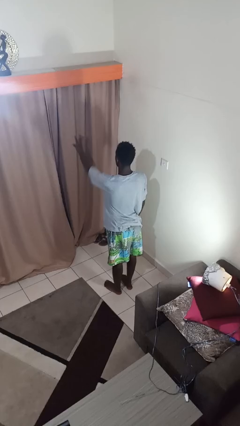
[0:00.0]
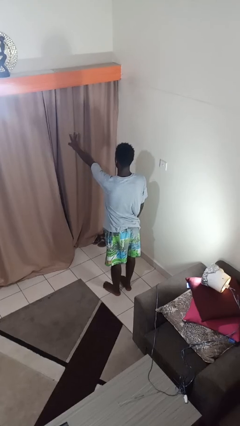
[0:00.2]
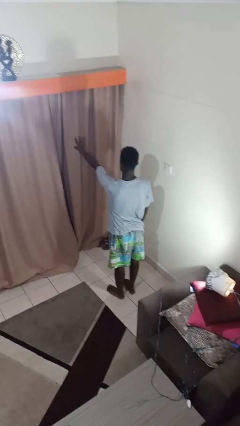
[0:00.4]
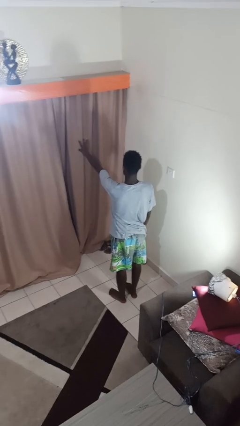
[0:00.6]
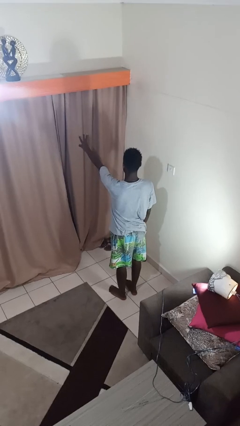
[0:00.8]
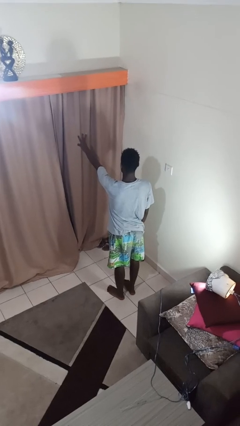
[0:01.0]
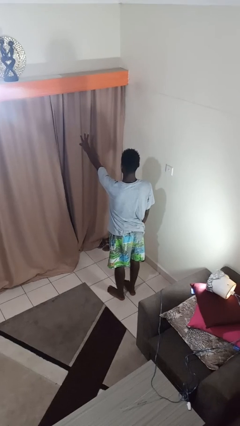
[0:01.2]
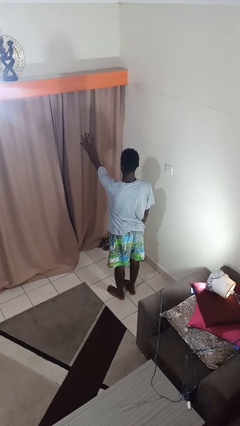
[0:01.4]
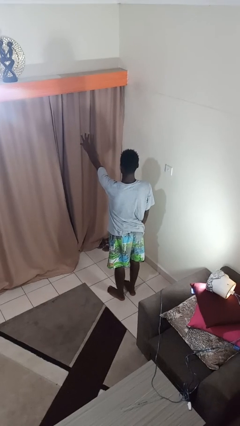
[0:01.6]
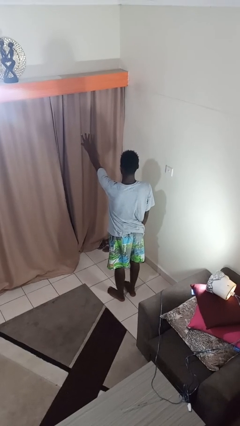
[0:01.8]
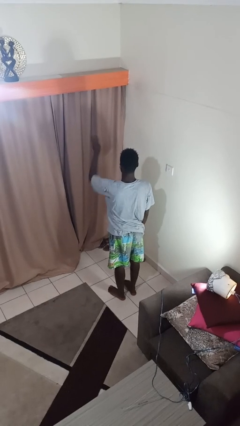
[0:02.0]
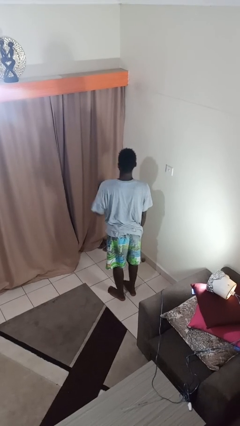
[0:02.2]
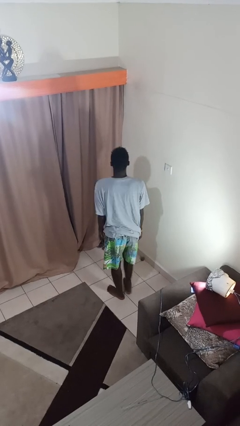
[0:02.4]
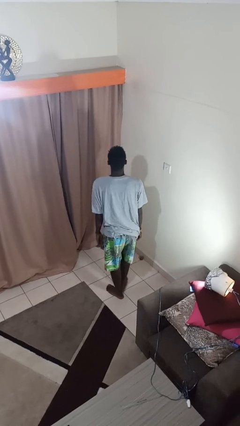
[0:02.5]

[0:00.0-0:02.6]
person gestures number three

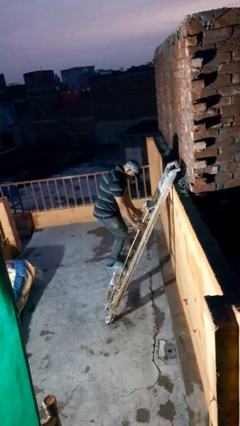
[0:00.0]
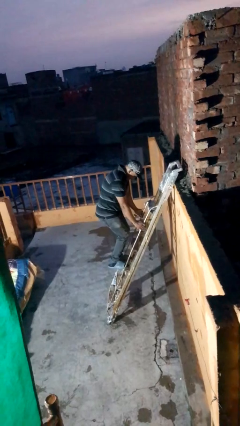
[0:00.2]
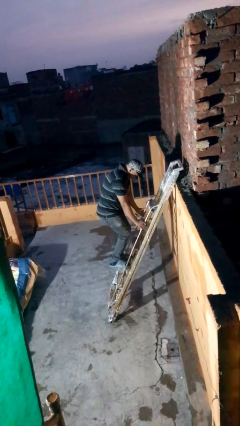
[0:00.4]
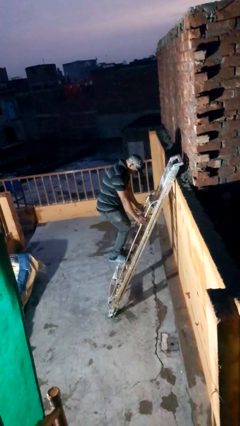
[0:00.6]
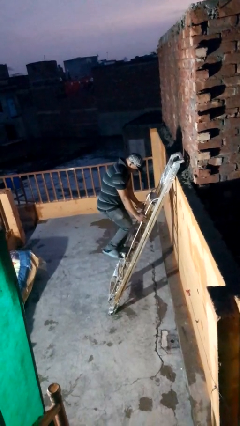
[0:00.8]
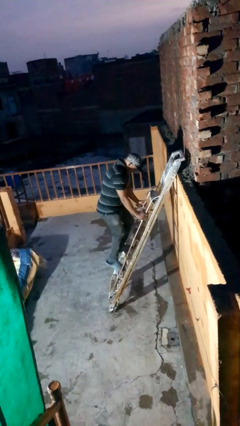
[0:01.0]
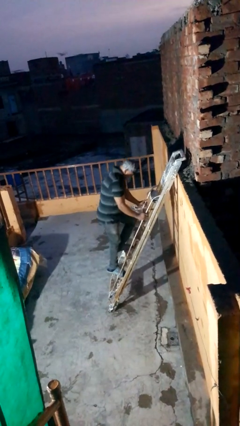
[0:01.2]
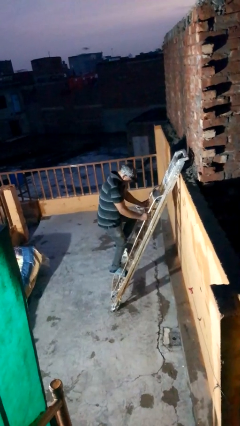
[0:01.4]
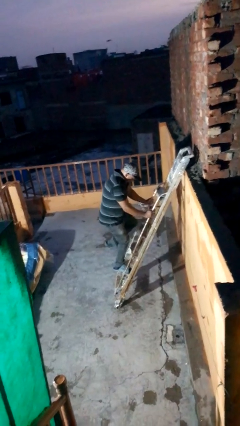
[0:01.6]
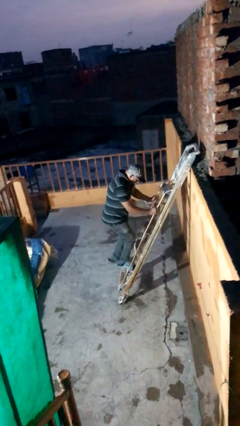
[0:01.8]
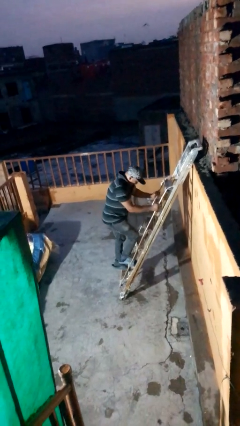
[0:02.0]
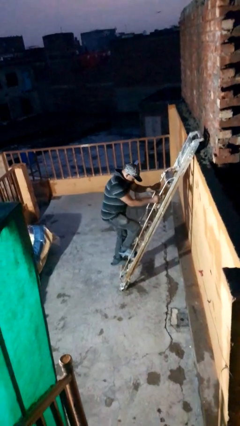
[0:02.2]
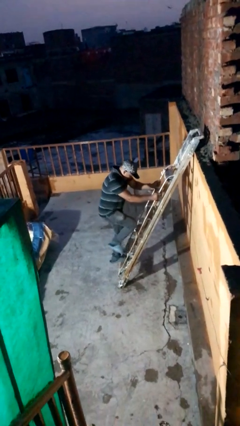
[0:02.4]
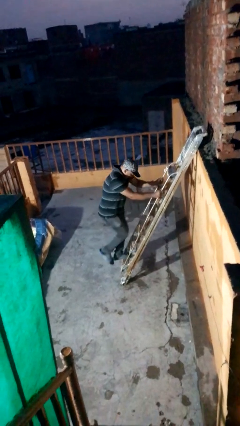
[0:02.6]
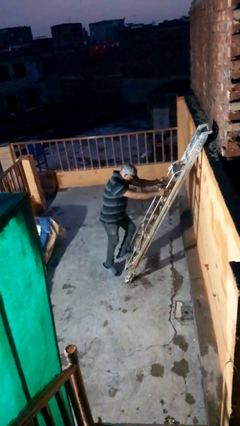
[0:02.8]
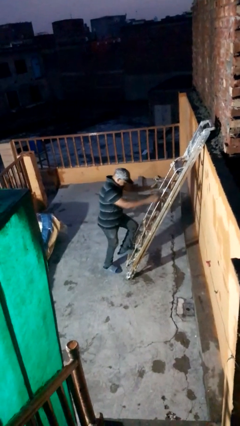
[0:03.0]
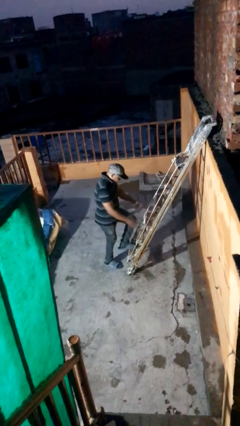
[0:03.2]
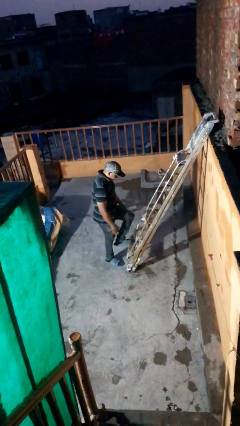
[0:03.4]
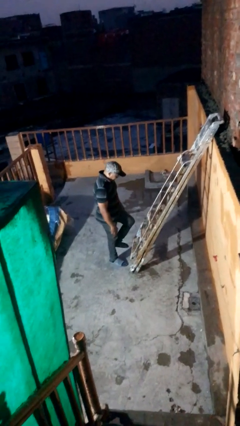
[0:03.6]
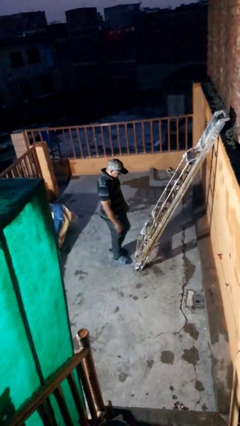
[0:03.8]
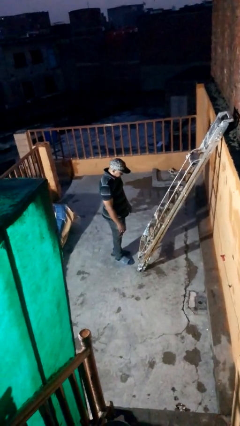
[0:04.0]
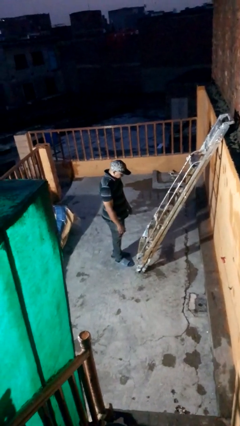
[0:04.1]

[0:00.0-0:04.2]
person climbs down ladder

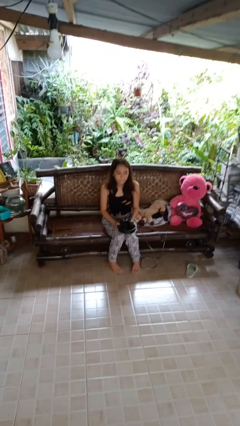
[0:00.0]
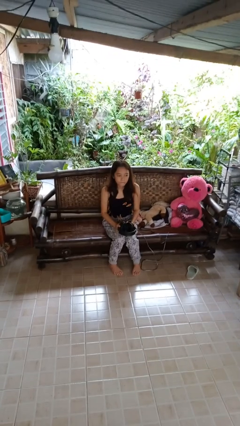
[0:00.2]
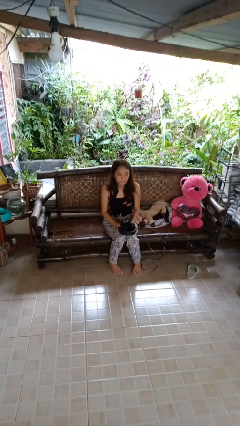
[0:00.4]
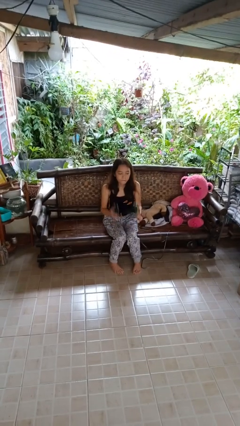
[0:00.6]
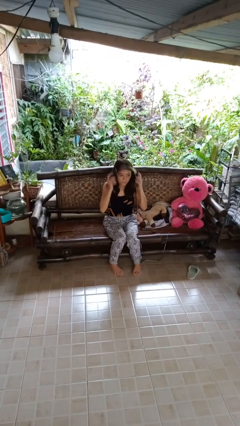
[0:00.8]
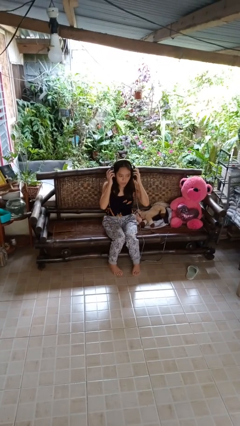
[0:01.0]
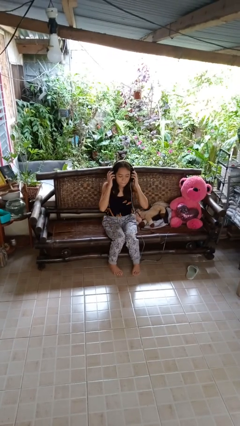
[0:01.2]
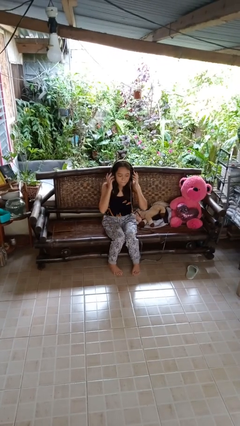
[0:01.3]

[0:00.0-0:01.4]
person puts on headphones

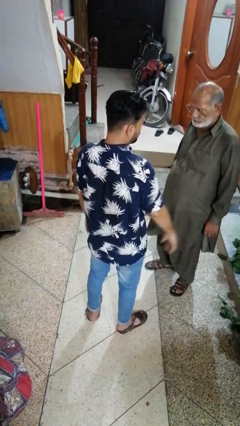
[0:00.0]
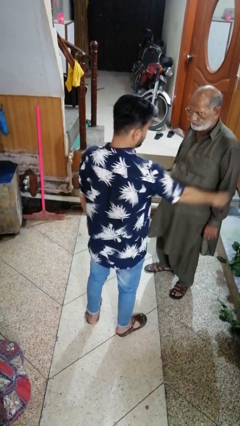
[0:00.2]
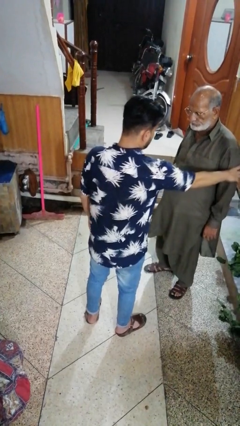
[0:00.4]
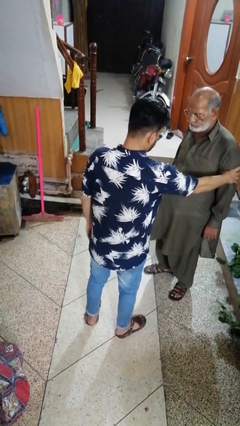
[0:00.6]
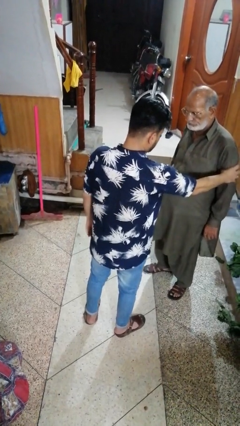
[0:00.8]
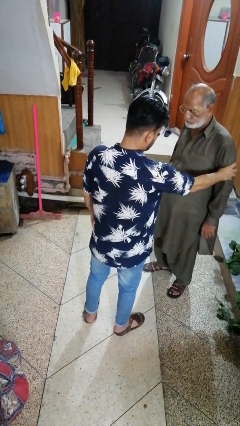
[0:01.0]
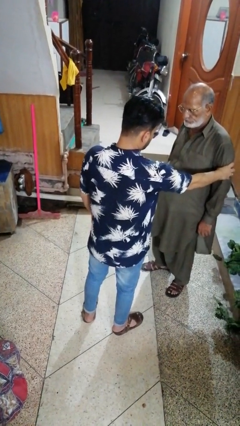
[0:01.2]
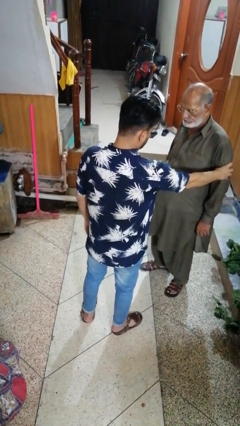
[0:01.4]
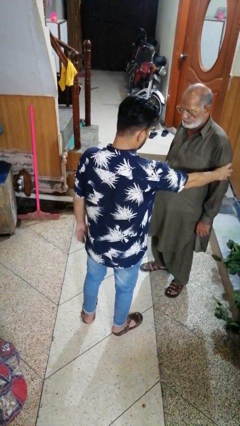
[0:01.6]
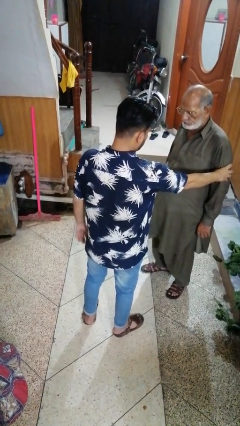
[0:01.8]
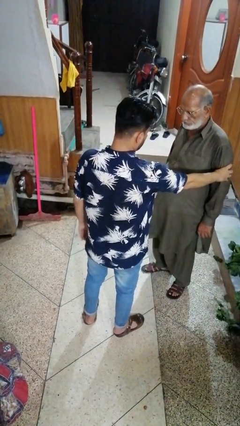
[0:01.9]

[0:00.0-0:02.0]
person grabs person by bicep

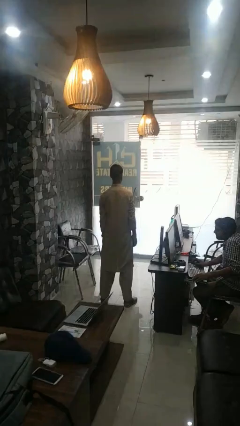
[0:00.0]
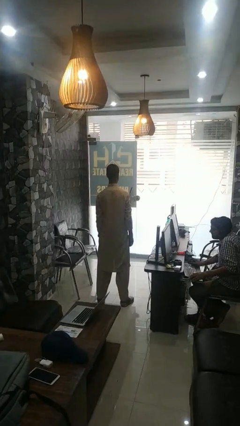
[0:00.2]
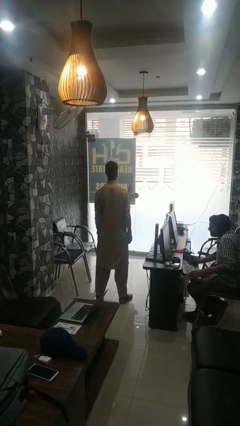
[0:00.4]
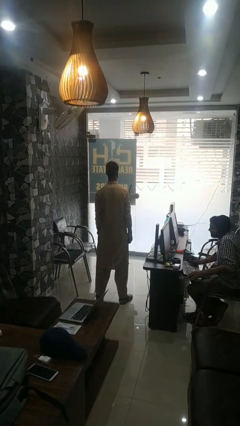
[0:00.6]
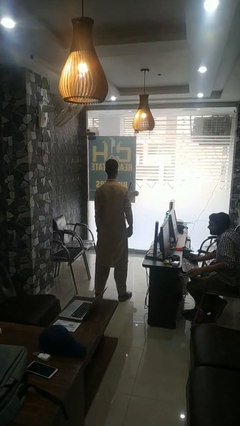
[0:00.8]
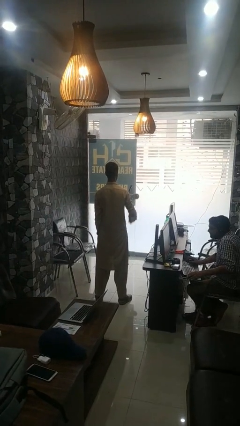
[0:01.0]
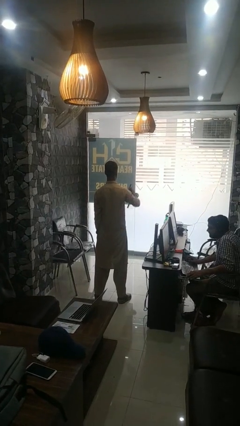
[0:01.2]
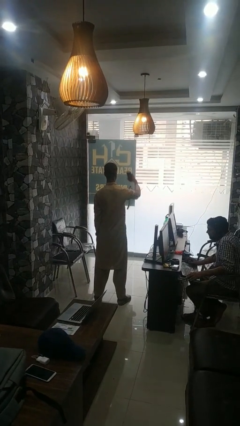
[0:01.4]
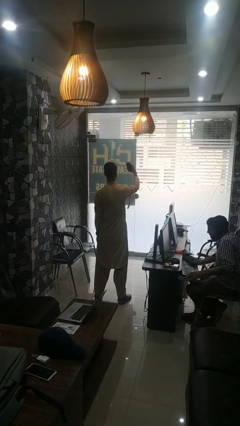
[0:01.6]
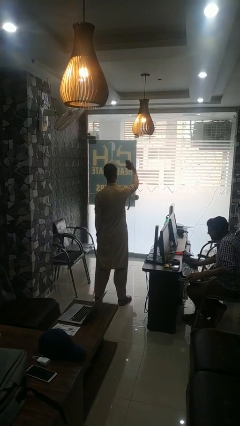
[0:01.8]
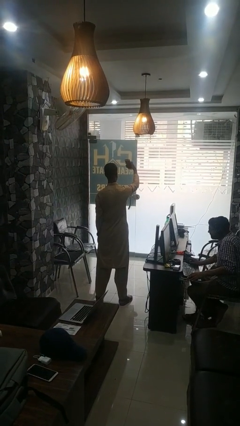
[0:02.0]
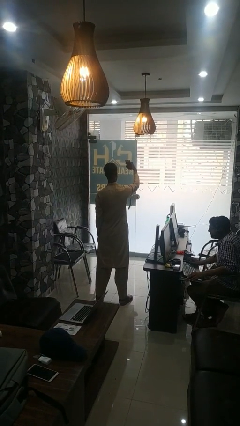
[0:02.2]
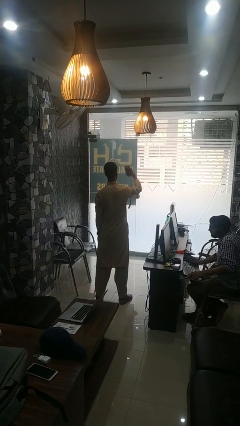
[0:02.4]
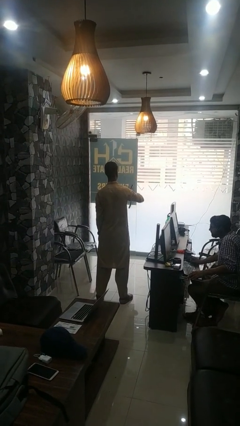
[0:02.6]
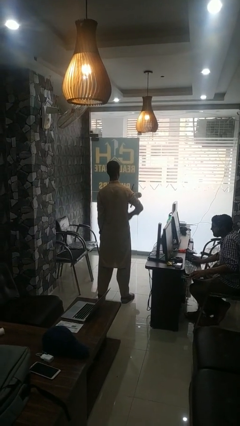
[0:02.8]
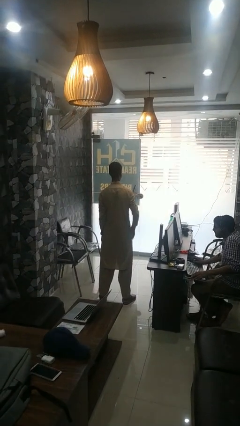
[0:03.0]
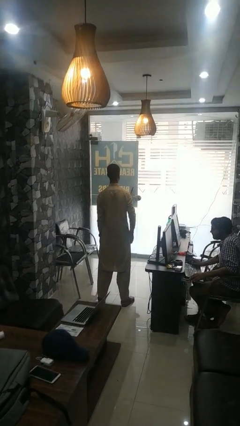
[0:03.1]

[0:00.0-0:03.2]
person takes selfie

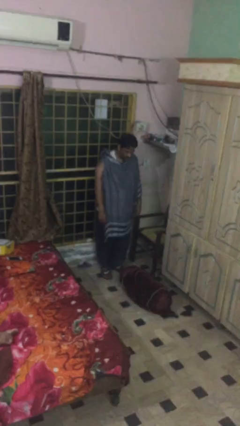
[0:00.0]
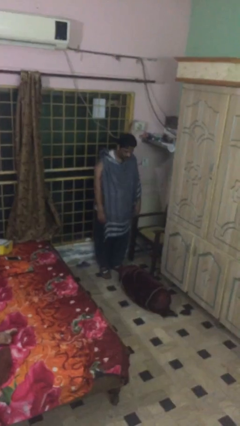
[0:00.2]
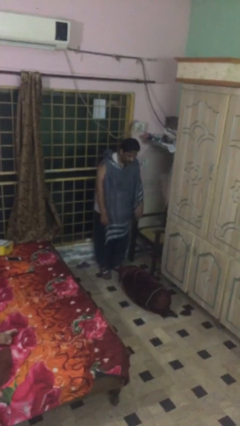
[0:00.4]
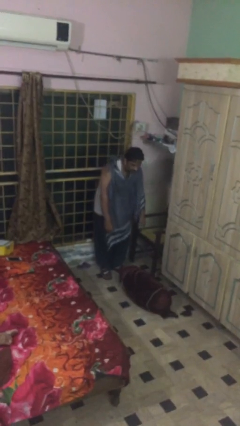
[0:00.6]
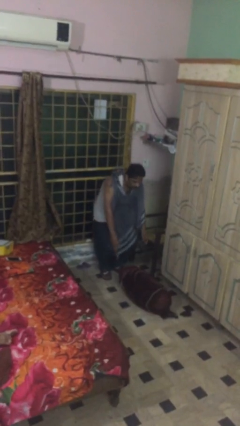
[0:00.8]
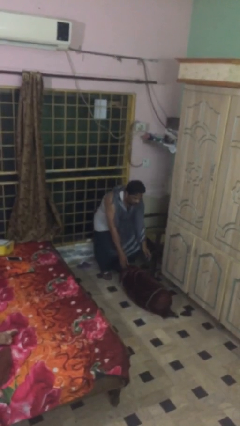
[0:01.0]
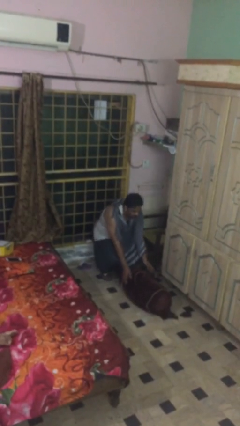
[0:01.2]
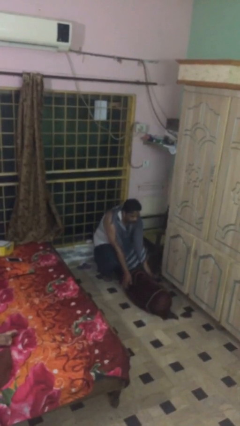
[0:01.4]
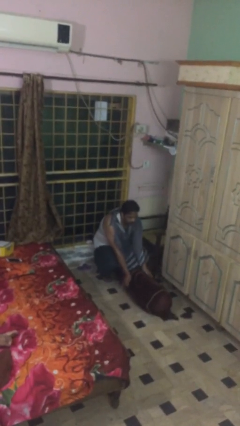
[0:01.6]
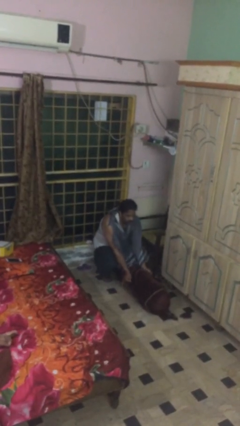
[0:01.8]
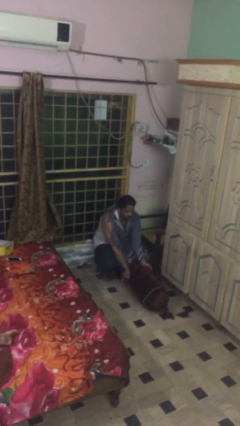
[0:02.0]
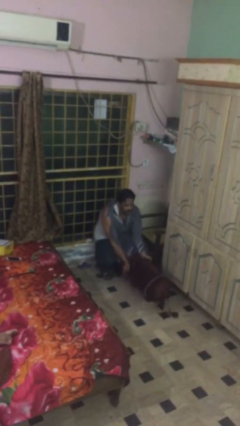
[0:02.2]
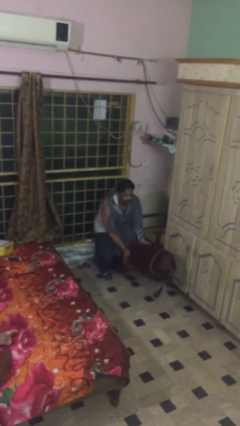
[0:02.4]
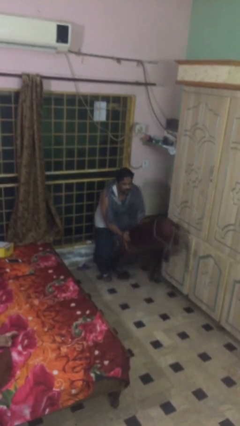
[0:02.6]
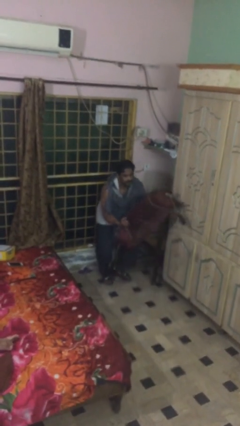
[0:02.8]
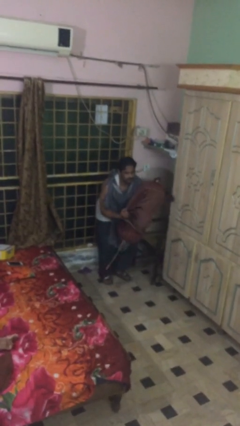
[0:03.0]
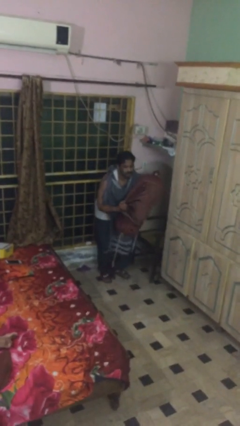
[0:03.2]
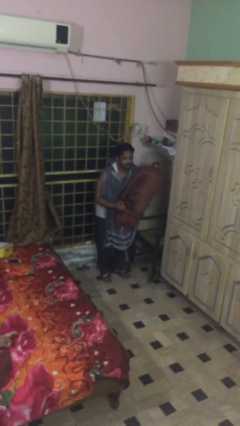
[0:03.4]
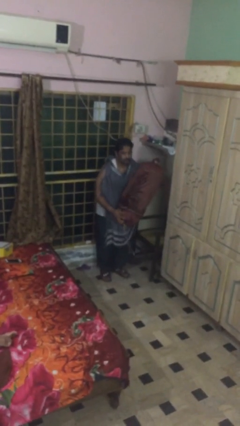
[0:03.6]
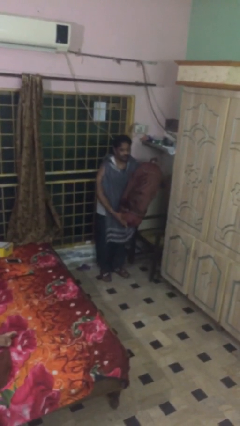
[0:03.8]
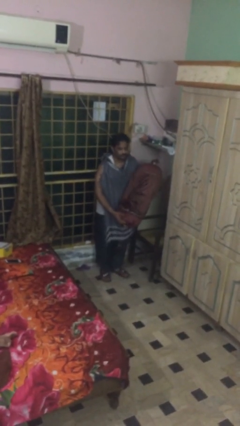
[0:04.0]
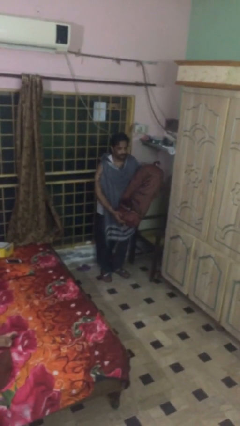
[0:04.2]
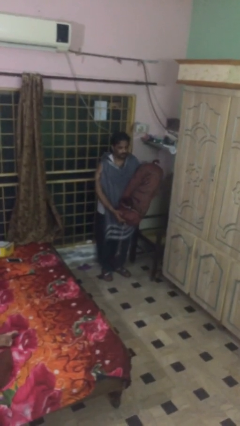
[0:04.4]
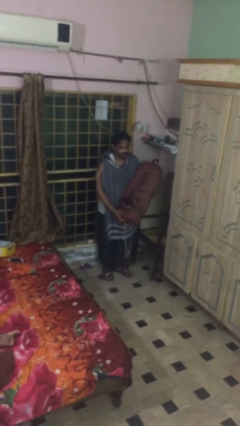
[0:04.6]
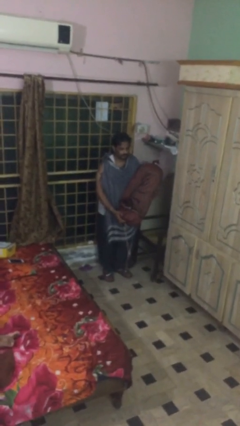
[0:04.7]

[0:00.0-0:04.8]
person picks up object from floor
